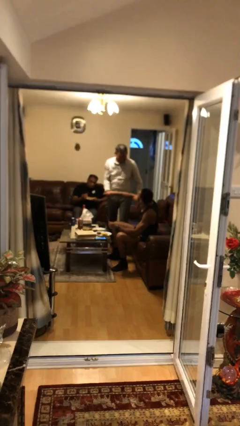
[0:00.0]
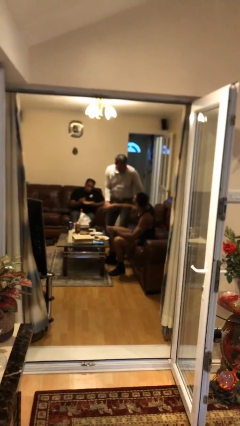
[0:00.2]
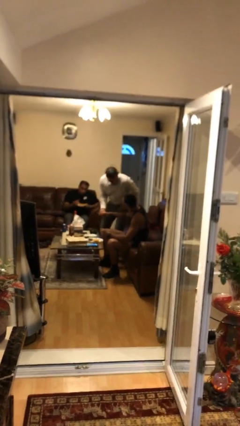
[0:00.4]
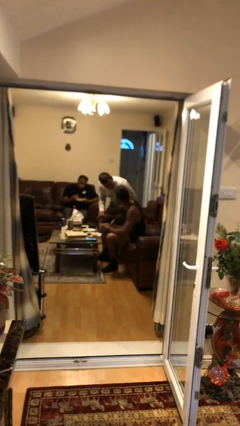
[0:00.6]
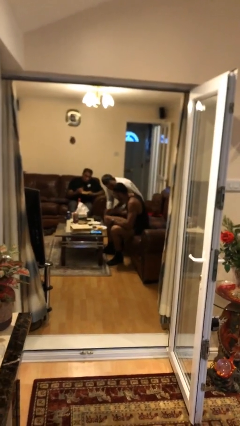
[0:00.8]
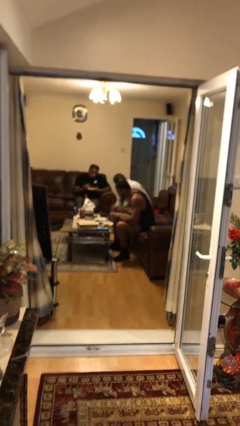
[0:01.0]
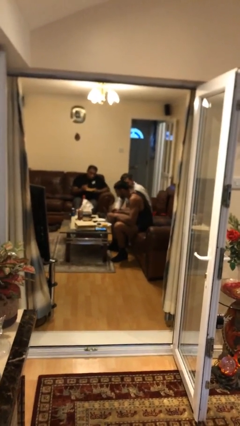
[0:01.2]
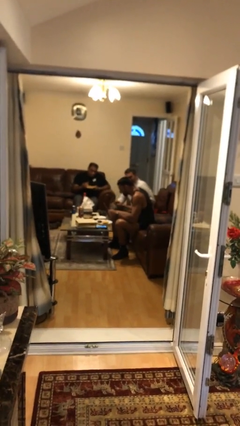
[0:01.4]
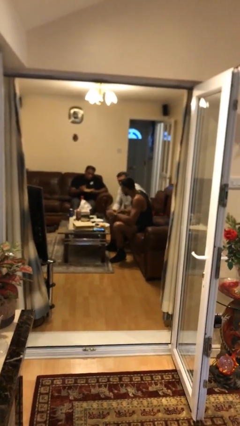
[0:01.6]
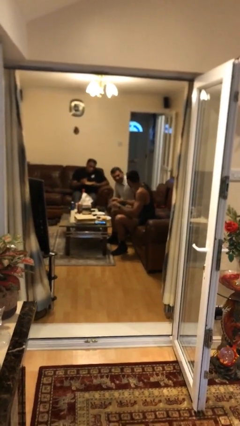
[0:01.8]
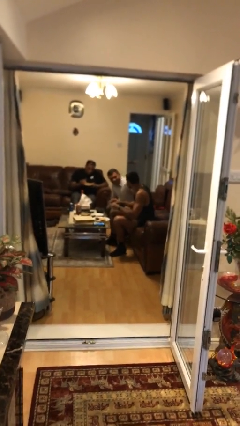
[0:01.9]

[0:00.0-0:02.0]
person highfives hand

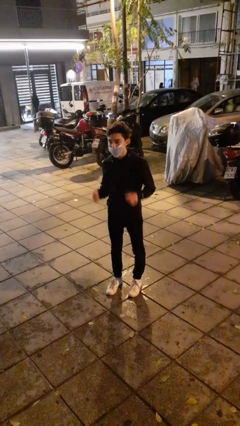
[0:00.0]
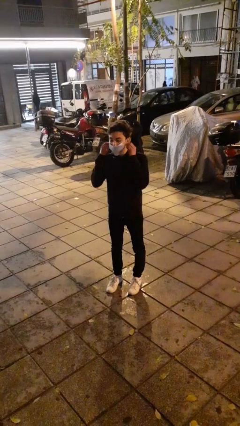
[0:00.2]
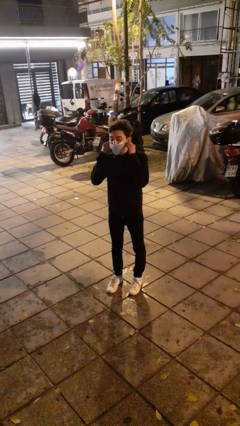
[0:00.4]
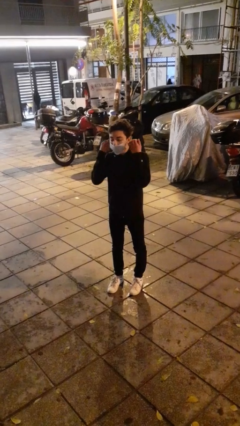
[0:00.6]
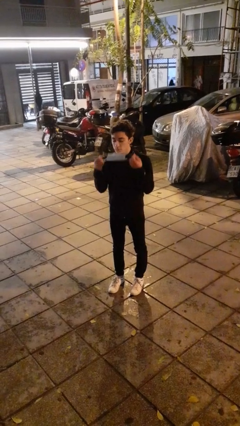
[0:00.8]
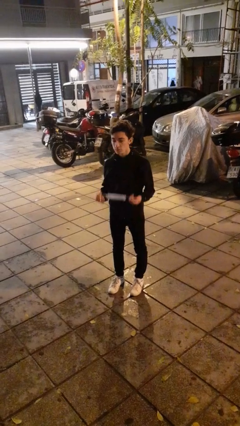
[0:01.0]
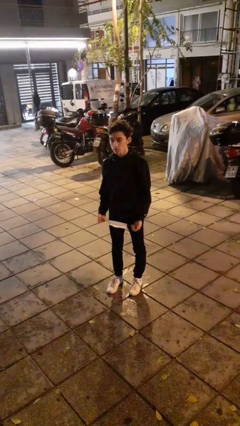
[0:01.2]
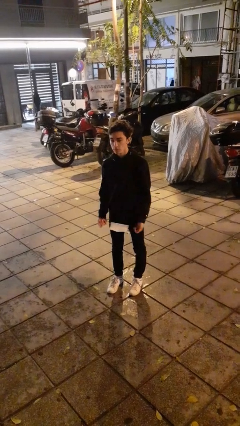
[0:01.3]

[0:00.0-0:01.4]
person takes off facemask

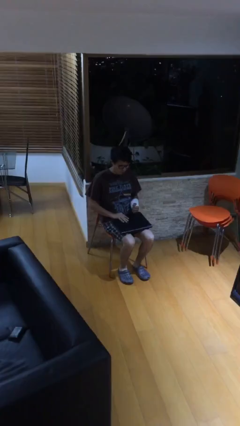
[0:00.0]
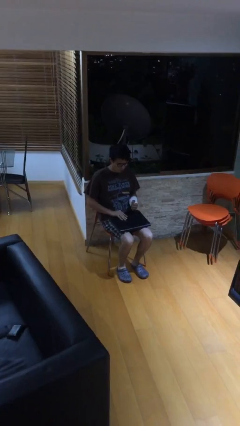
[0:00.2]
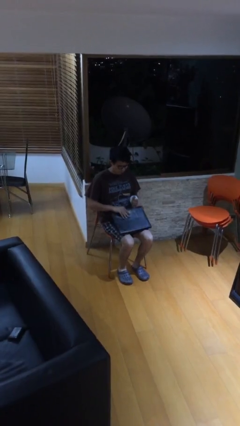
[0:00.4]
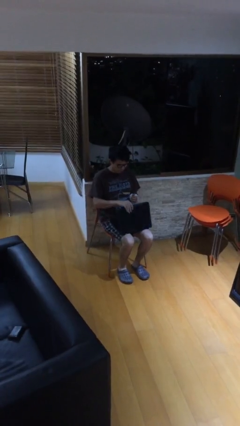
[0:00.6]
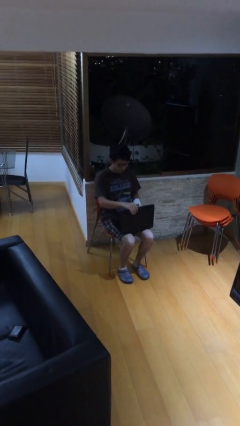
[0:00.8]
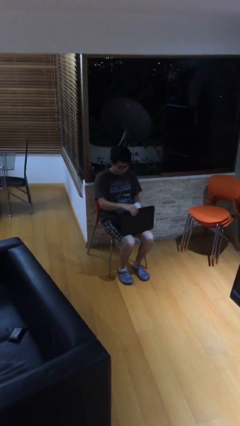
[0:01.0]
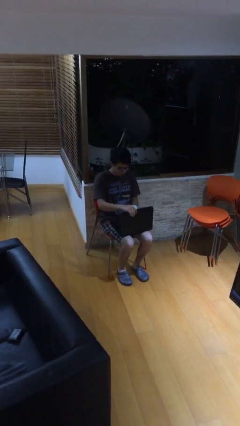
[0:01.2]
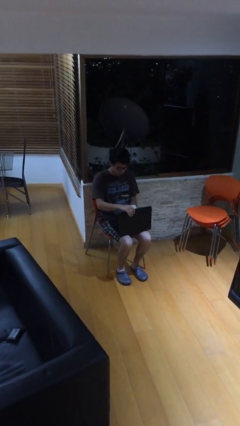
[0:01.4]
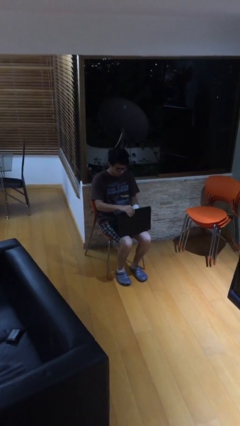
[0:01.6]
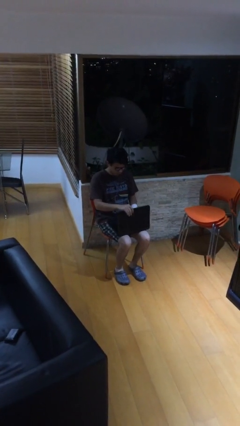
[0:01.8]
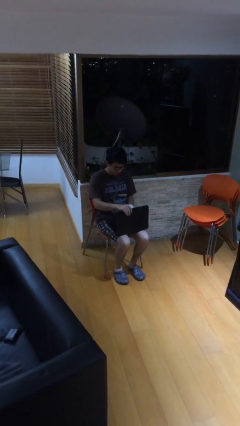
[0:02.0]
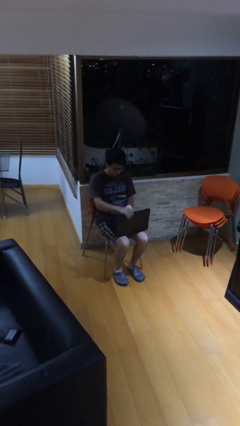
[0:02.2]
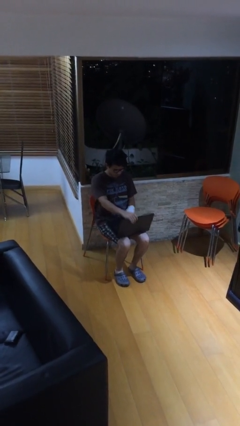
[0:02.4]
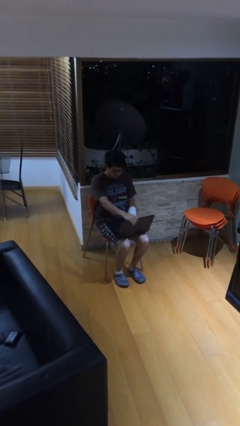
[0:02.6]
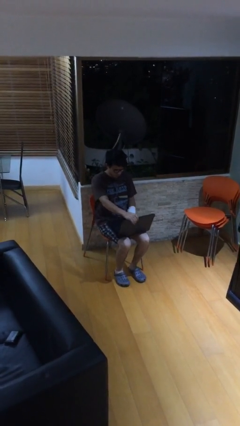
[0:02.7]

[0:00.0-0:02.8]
person interacts with laptop

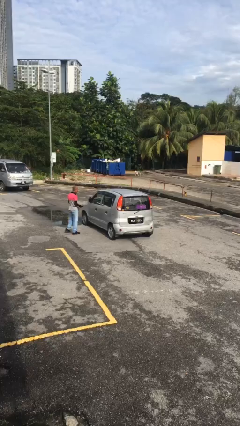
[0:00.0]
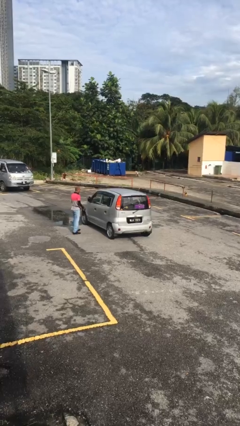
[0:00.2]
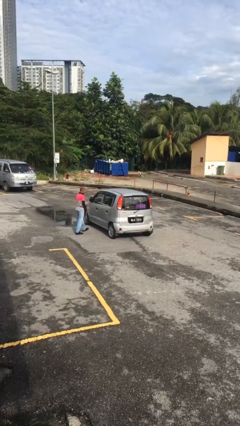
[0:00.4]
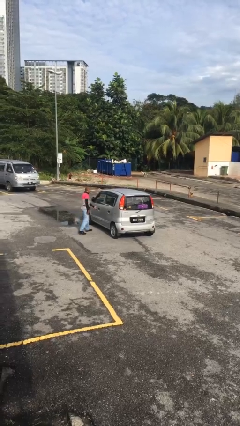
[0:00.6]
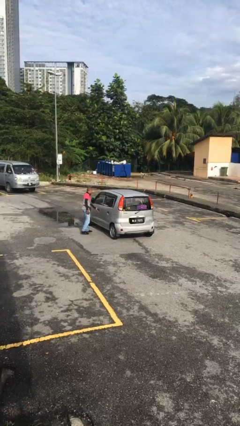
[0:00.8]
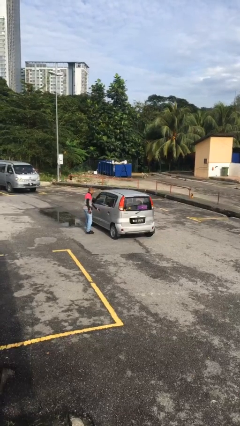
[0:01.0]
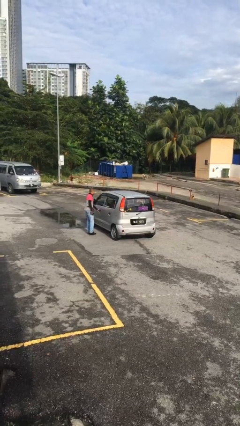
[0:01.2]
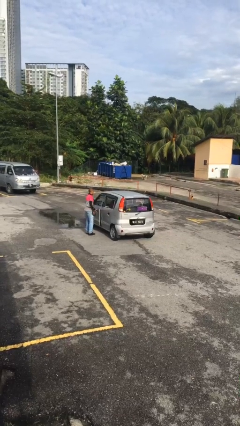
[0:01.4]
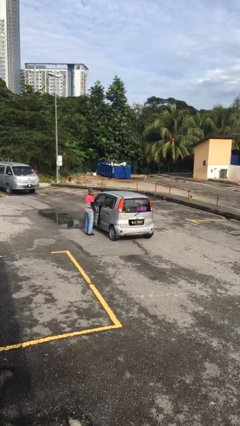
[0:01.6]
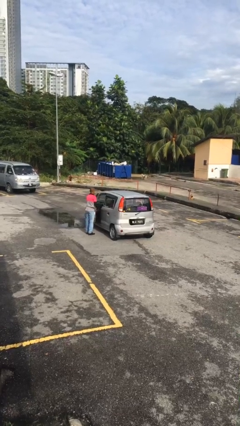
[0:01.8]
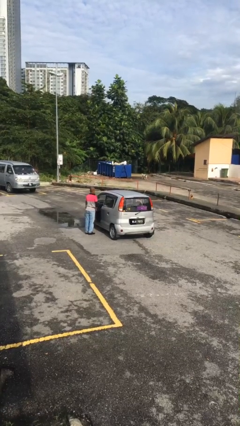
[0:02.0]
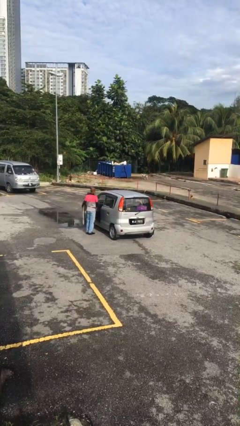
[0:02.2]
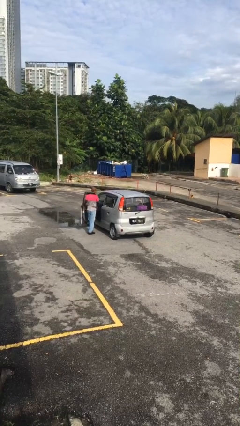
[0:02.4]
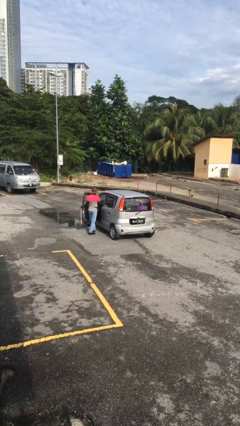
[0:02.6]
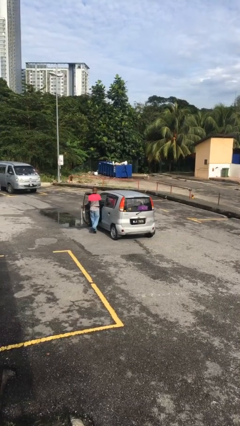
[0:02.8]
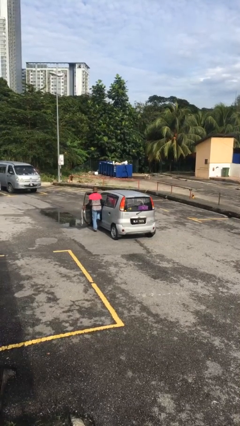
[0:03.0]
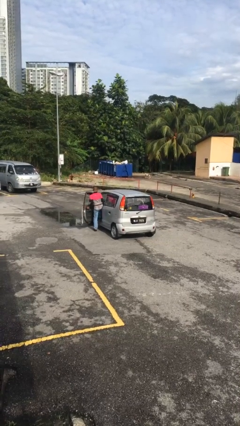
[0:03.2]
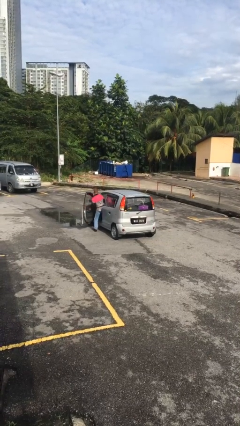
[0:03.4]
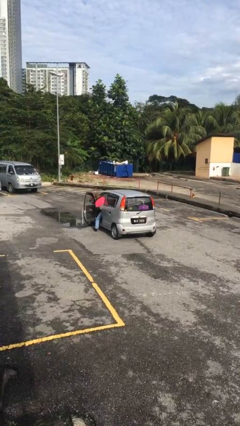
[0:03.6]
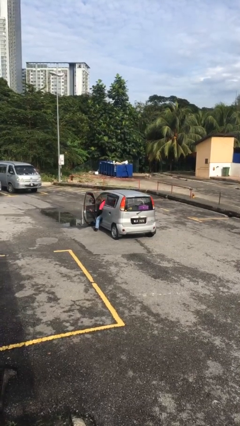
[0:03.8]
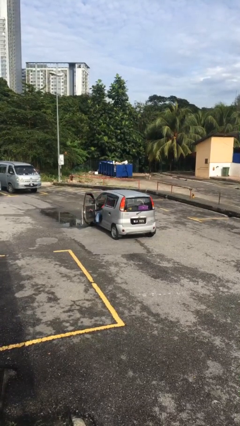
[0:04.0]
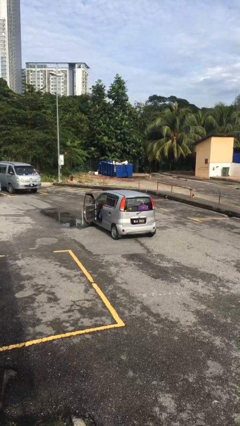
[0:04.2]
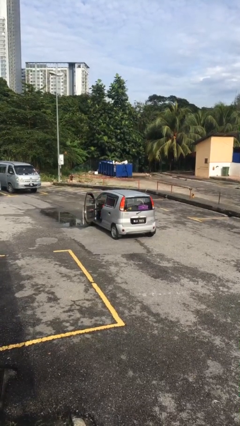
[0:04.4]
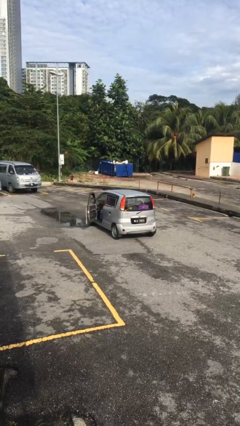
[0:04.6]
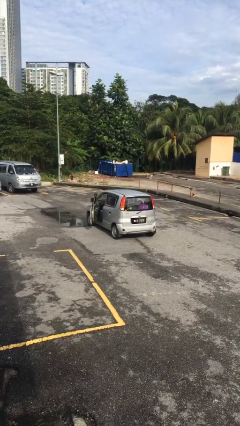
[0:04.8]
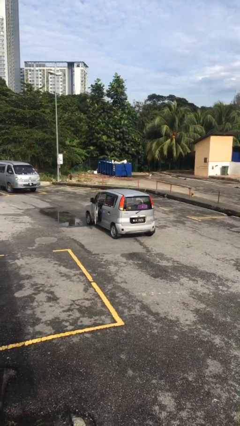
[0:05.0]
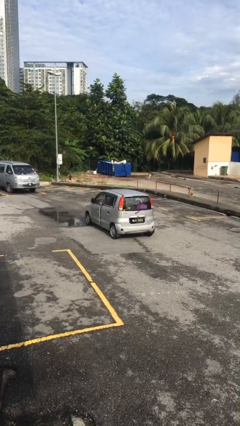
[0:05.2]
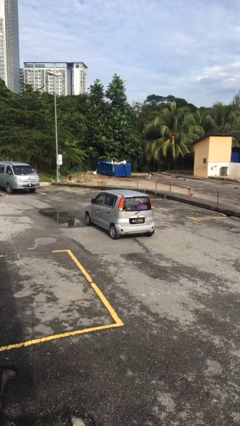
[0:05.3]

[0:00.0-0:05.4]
car picks up person

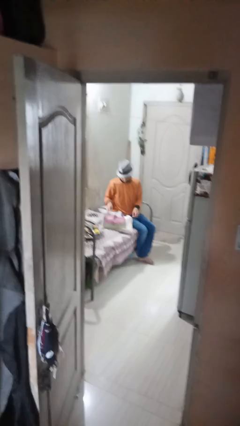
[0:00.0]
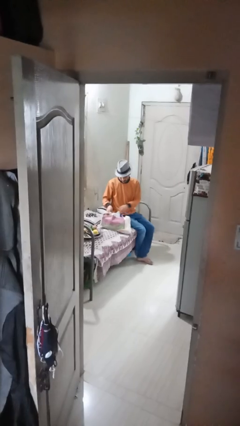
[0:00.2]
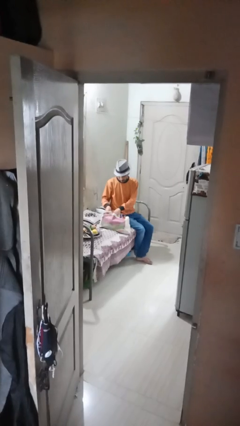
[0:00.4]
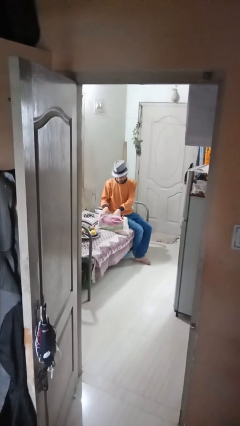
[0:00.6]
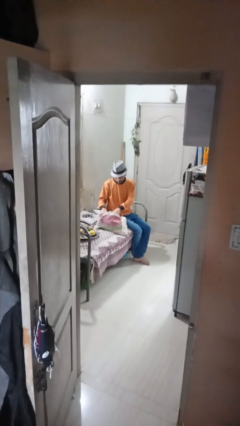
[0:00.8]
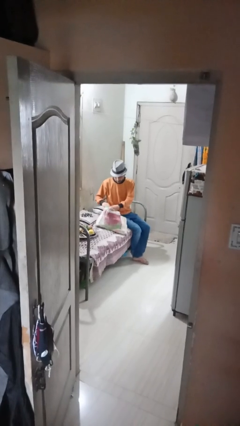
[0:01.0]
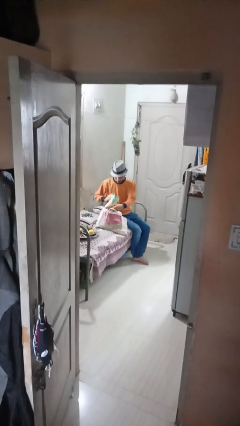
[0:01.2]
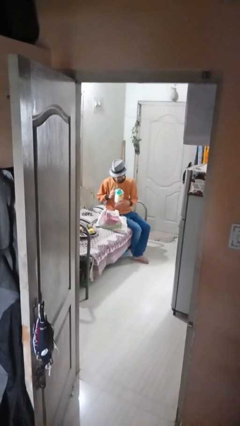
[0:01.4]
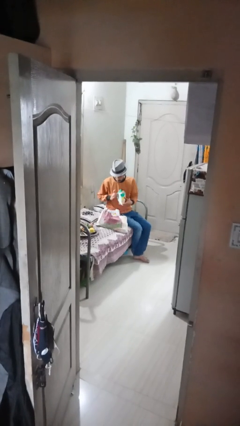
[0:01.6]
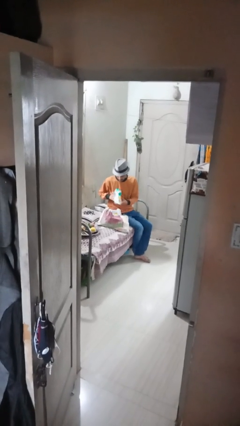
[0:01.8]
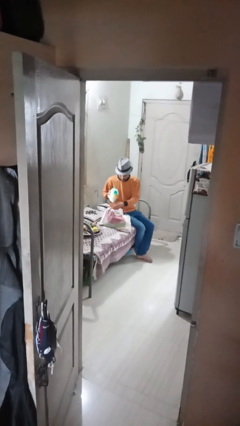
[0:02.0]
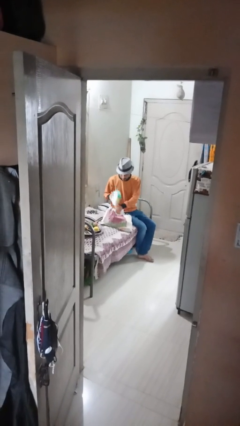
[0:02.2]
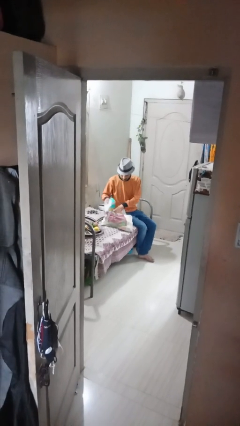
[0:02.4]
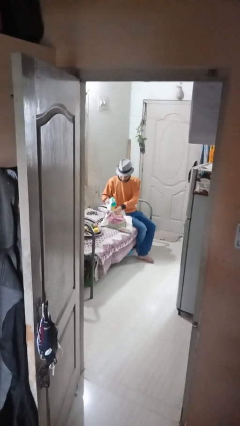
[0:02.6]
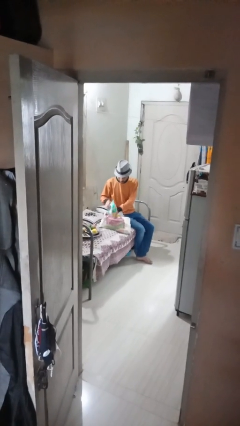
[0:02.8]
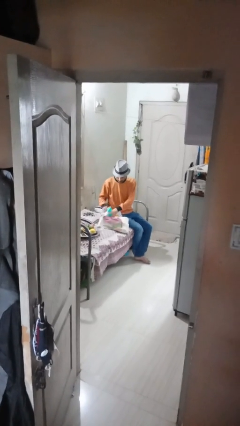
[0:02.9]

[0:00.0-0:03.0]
person searches in bag

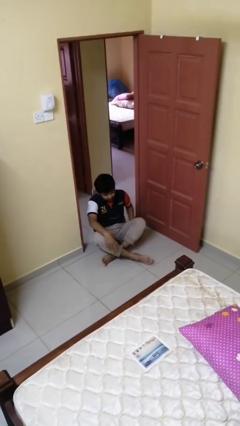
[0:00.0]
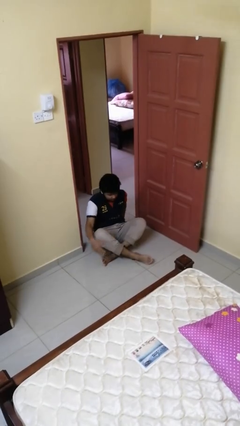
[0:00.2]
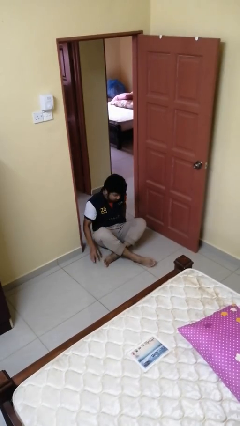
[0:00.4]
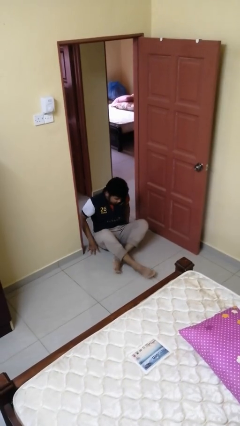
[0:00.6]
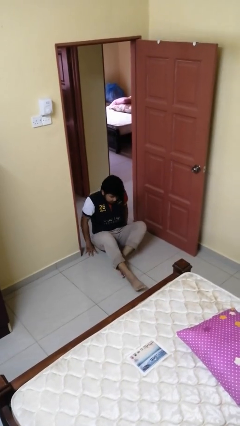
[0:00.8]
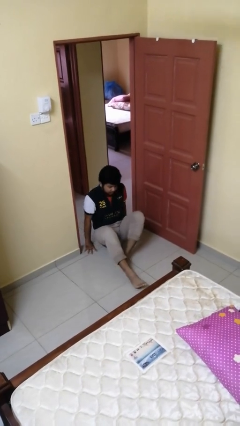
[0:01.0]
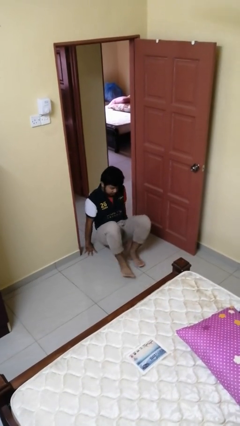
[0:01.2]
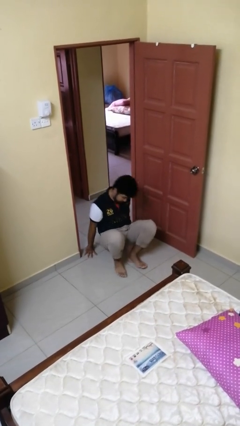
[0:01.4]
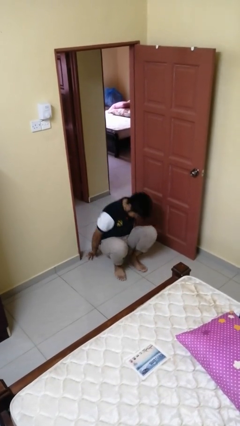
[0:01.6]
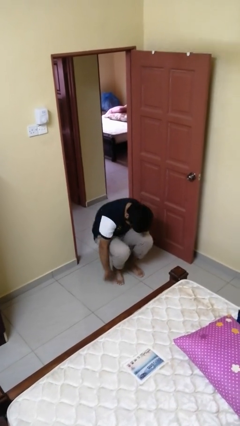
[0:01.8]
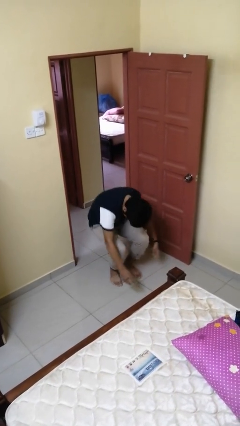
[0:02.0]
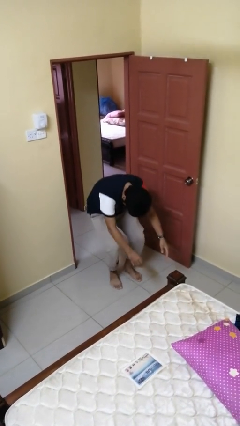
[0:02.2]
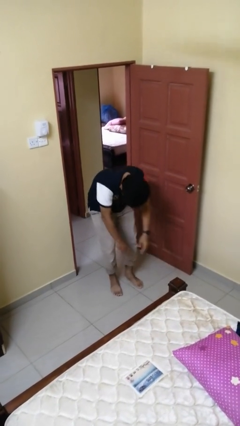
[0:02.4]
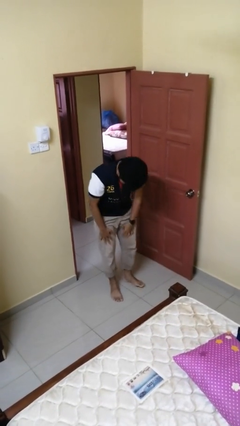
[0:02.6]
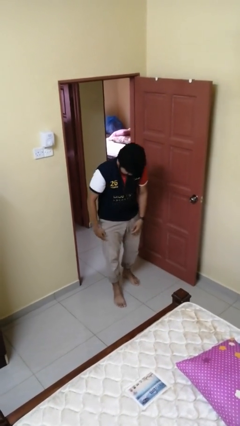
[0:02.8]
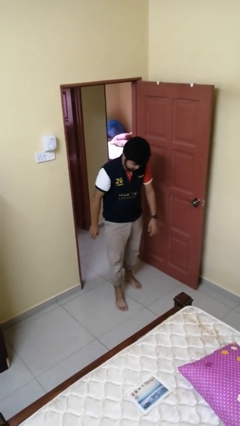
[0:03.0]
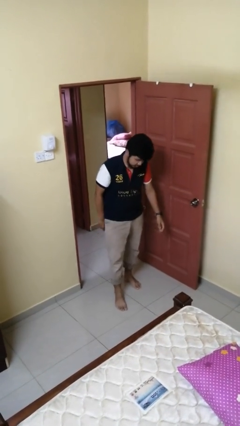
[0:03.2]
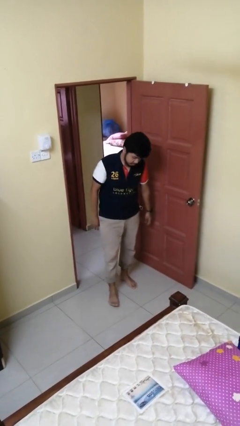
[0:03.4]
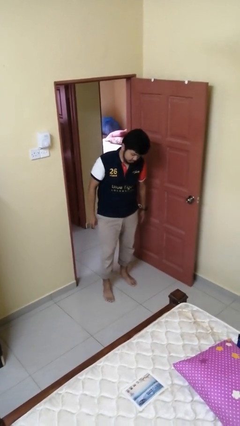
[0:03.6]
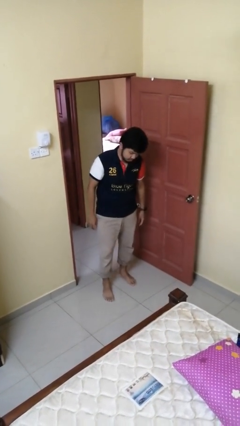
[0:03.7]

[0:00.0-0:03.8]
person stands up from floor
